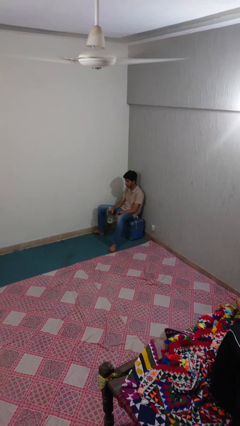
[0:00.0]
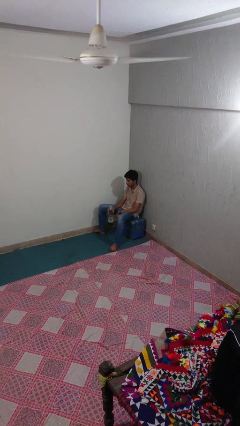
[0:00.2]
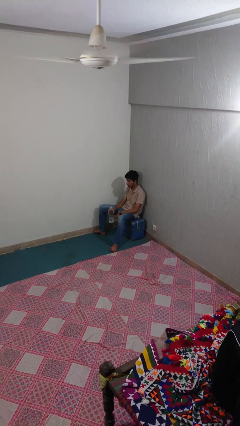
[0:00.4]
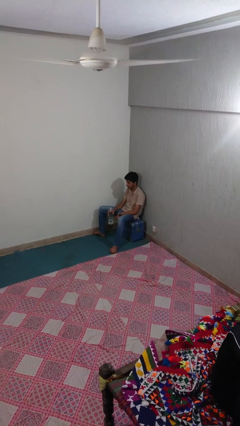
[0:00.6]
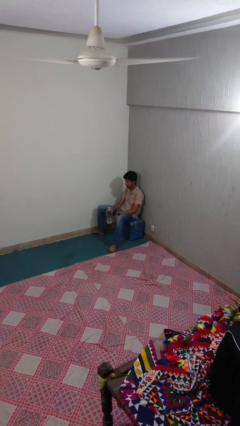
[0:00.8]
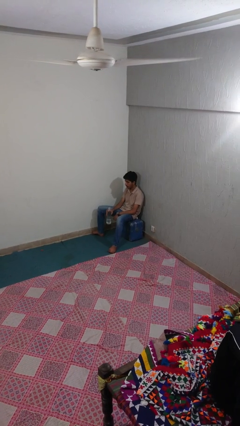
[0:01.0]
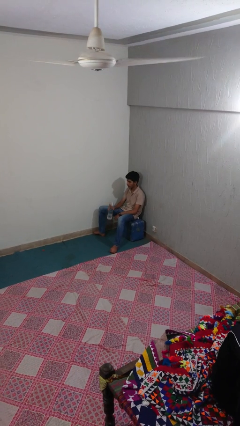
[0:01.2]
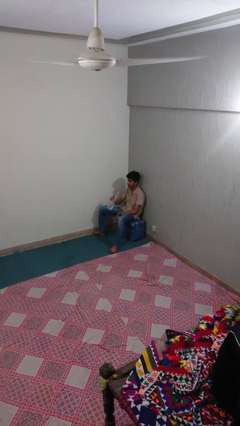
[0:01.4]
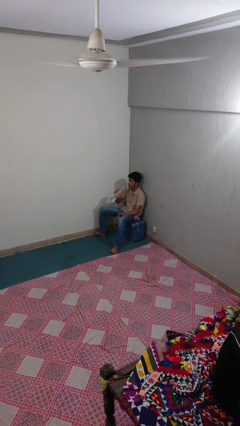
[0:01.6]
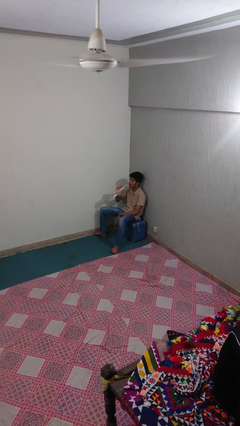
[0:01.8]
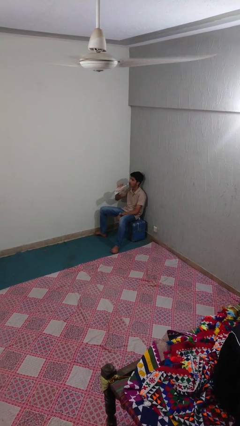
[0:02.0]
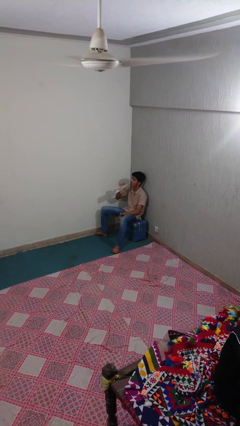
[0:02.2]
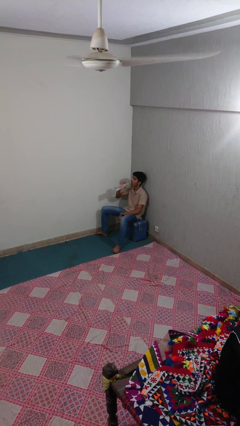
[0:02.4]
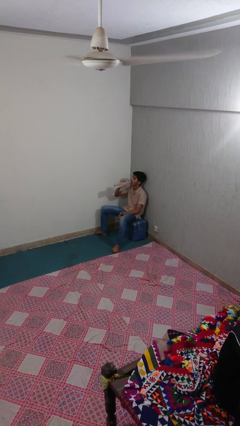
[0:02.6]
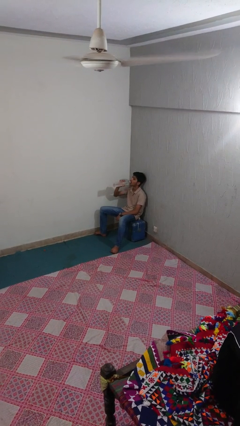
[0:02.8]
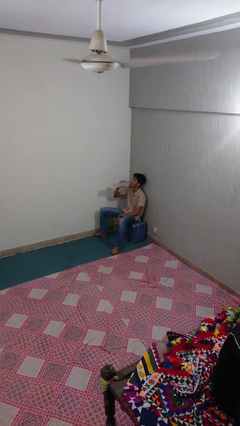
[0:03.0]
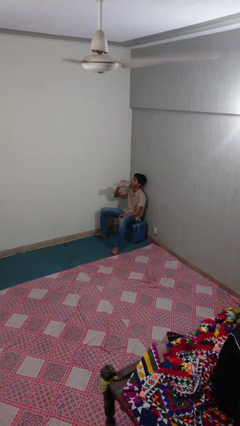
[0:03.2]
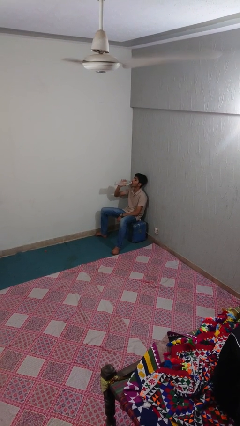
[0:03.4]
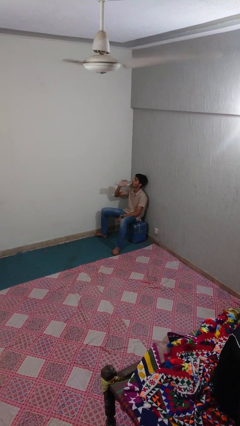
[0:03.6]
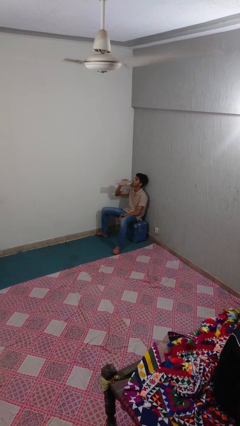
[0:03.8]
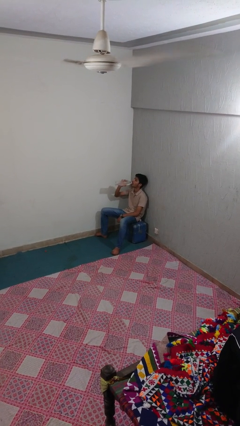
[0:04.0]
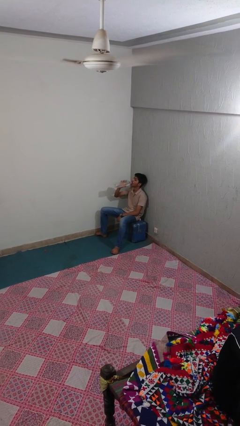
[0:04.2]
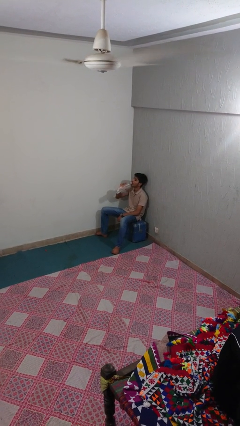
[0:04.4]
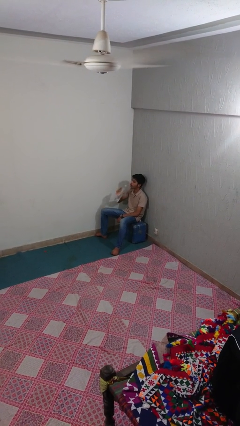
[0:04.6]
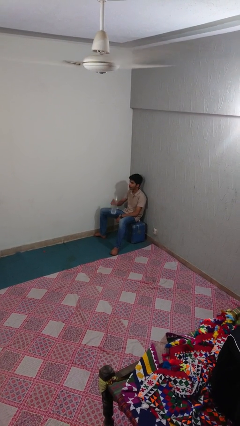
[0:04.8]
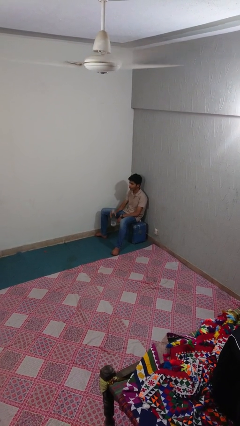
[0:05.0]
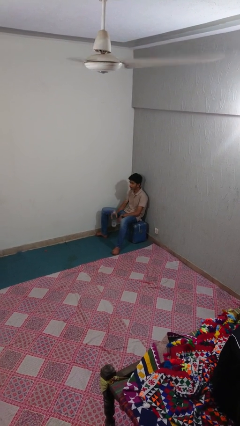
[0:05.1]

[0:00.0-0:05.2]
person drinks from bottle

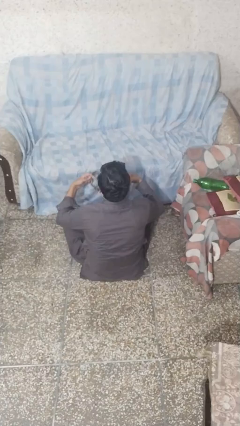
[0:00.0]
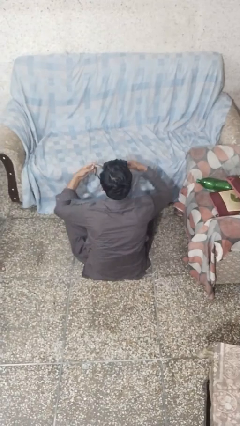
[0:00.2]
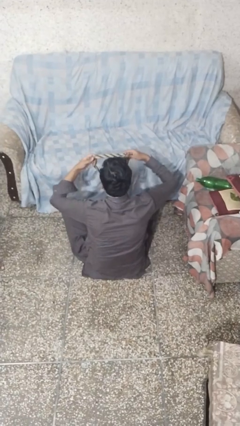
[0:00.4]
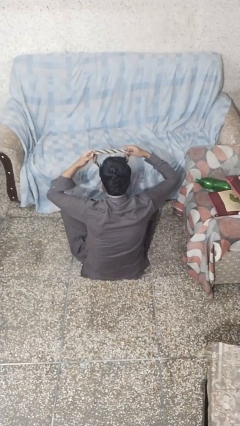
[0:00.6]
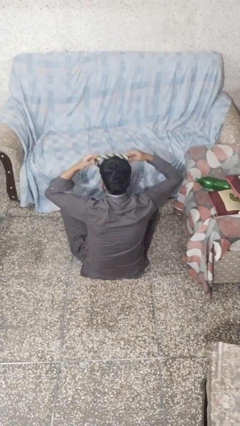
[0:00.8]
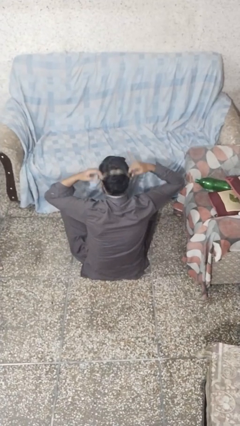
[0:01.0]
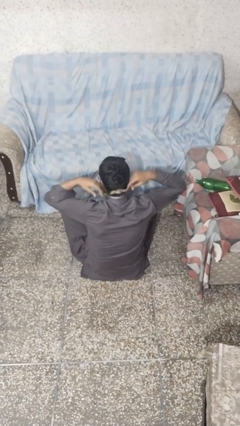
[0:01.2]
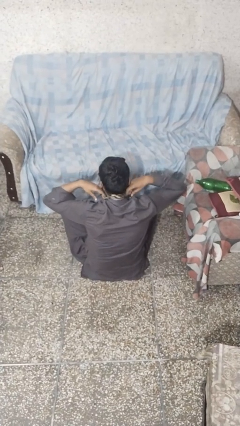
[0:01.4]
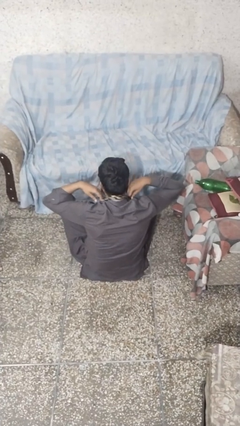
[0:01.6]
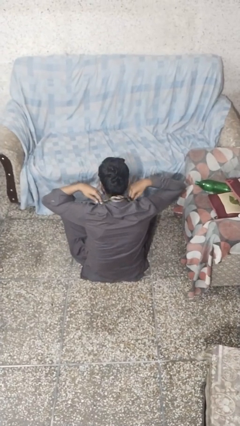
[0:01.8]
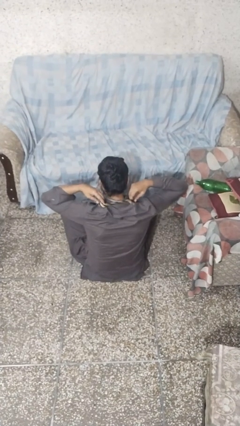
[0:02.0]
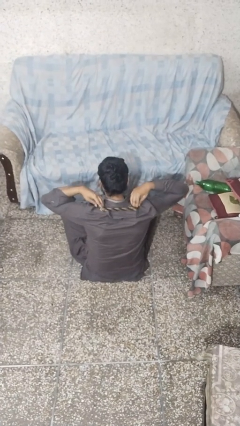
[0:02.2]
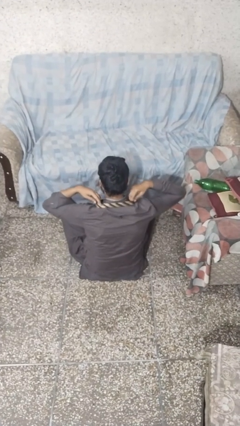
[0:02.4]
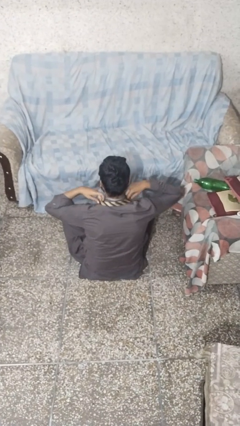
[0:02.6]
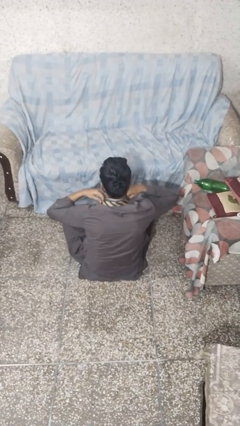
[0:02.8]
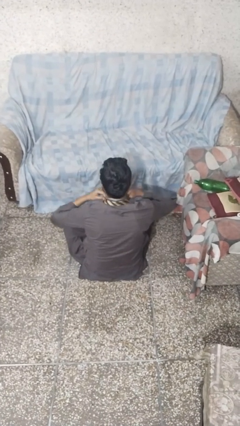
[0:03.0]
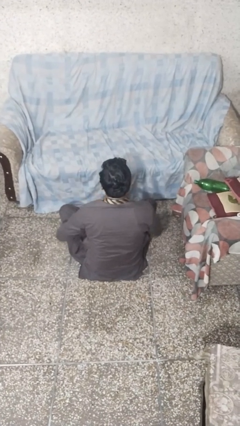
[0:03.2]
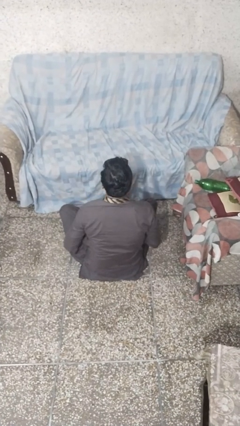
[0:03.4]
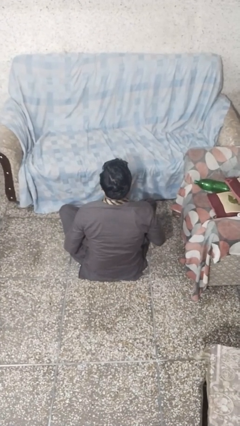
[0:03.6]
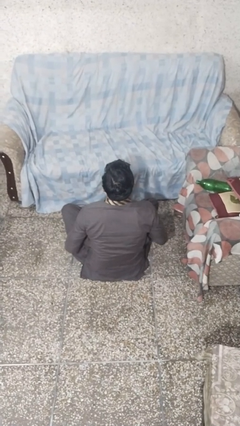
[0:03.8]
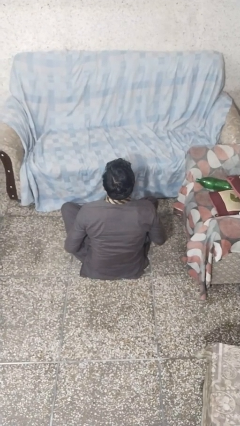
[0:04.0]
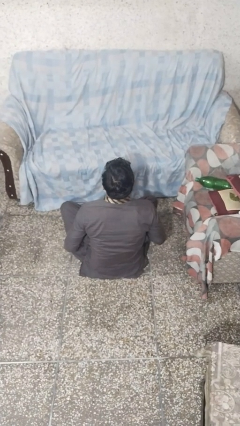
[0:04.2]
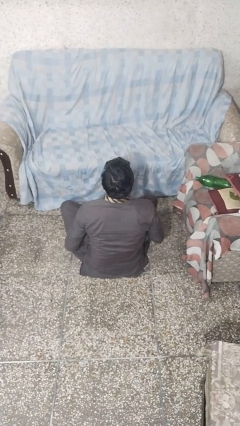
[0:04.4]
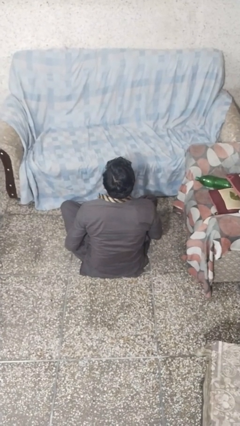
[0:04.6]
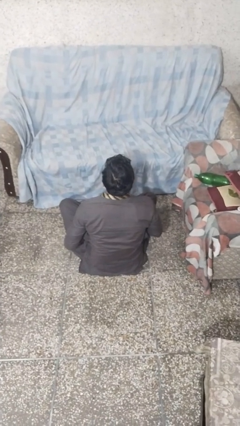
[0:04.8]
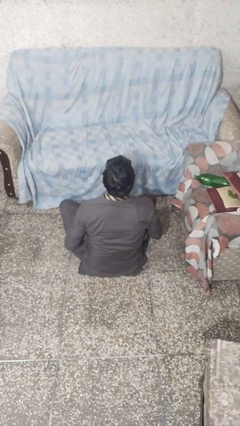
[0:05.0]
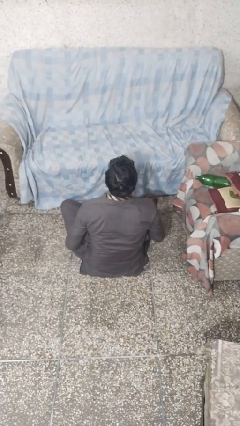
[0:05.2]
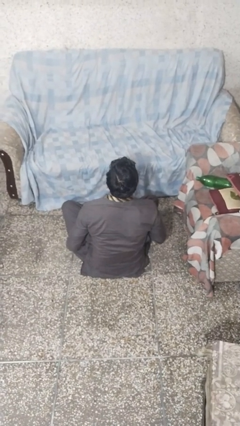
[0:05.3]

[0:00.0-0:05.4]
person puts on necktie

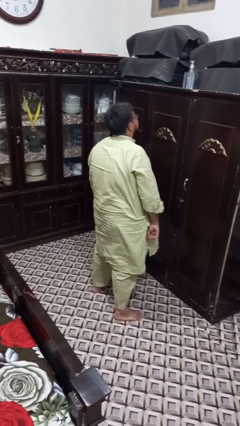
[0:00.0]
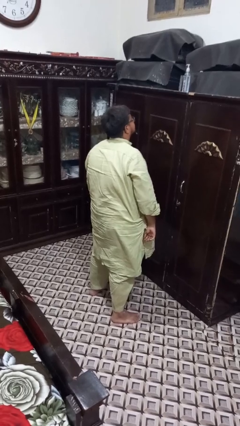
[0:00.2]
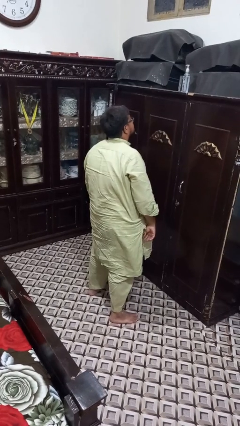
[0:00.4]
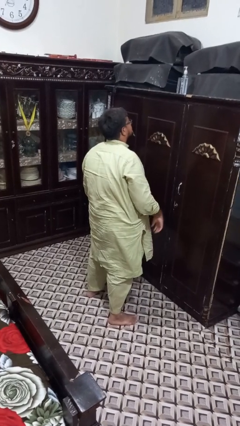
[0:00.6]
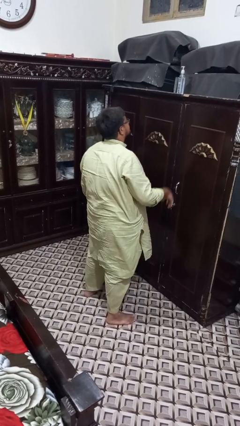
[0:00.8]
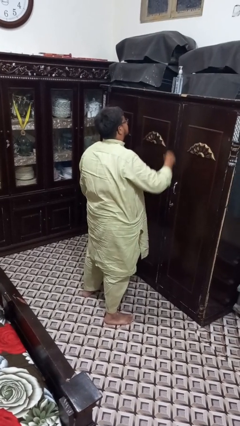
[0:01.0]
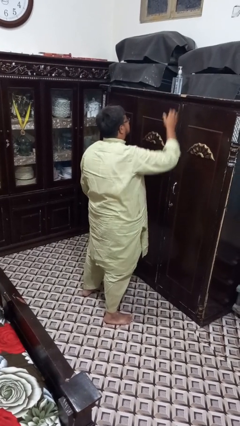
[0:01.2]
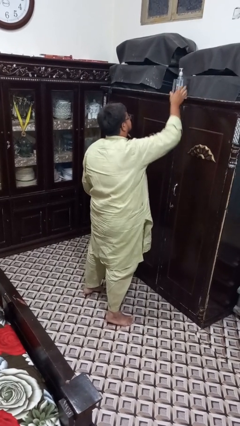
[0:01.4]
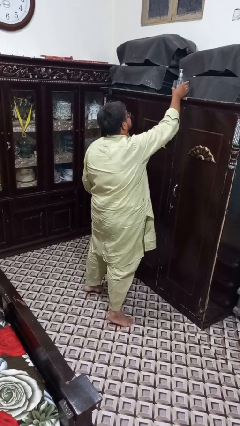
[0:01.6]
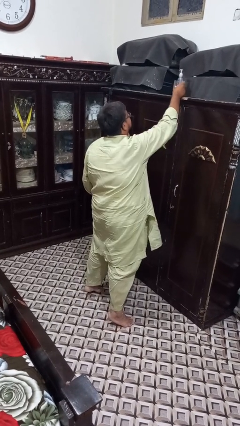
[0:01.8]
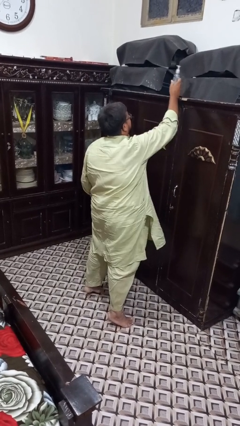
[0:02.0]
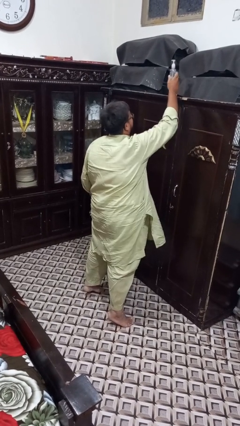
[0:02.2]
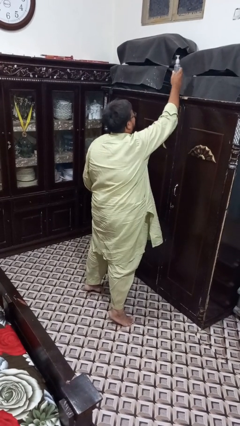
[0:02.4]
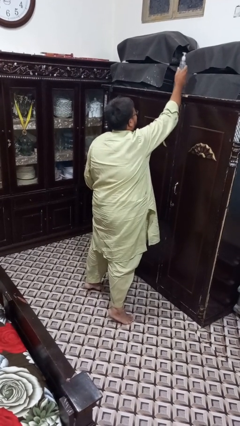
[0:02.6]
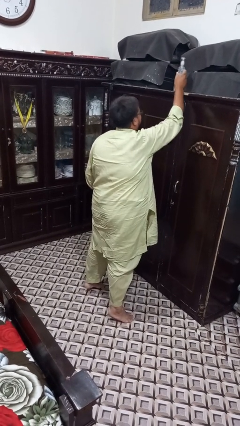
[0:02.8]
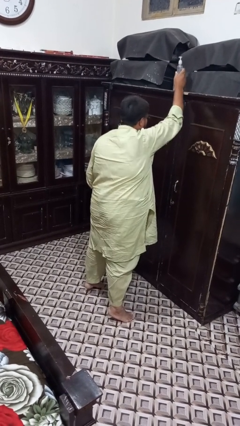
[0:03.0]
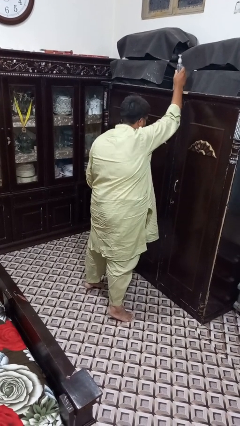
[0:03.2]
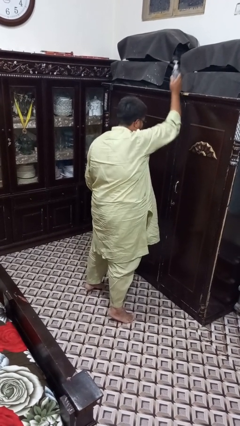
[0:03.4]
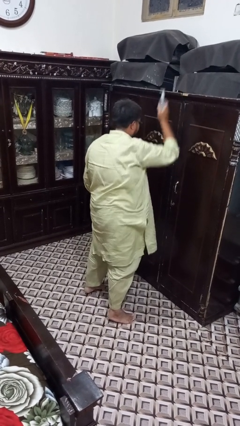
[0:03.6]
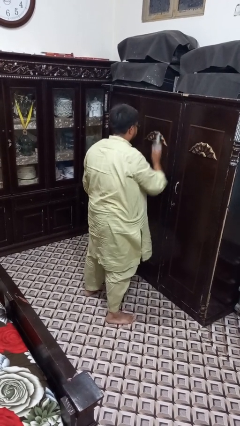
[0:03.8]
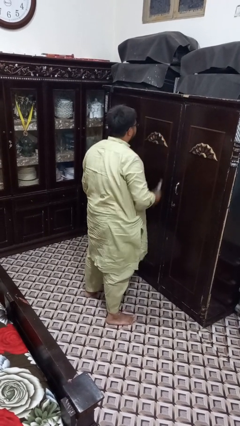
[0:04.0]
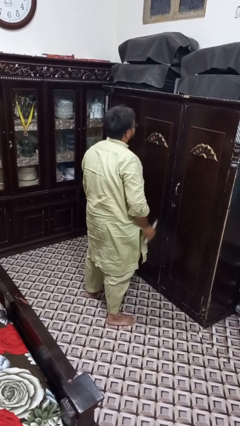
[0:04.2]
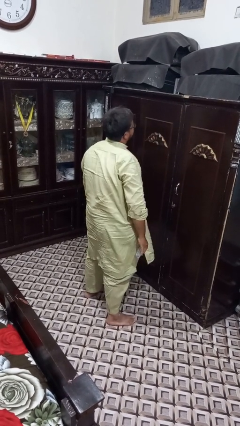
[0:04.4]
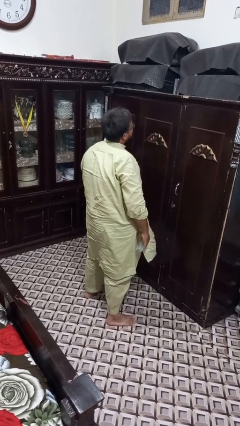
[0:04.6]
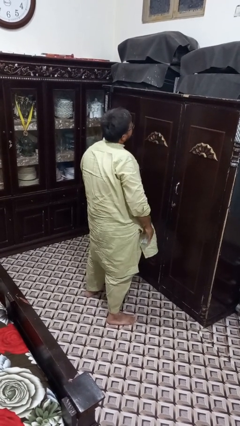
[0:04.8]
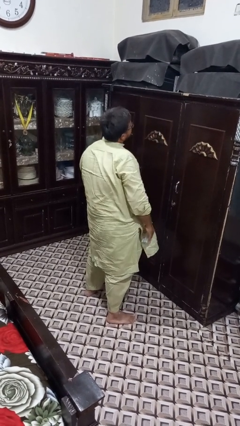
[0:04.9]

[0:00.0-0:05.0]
person picks up object from cabinet

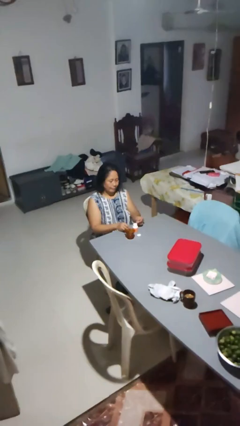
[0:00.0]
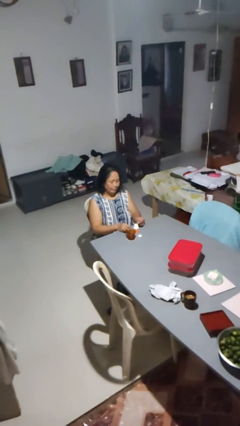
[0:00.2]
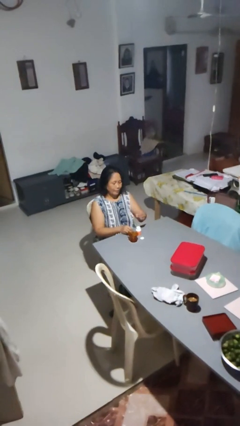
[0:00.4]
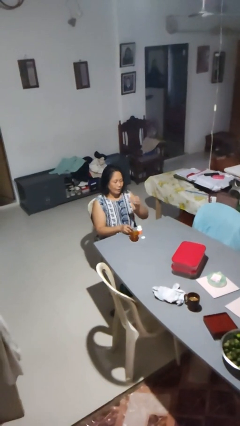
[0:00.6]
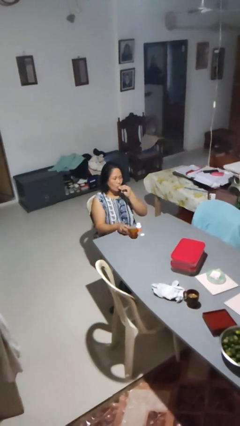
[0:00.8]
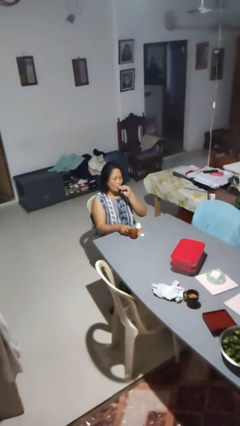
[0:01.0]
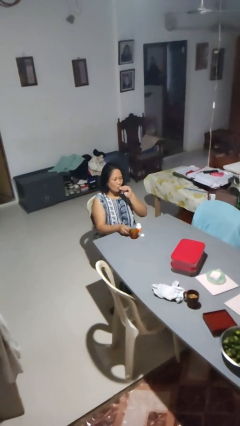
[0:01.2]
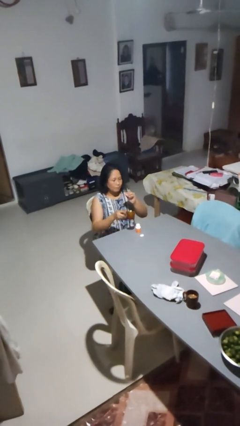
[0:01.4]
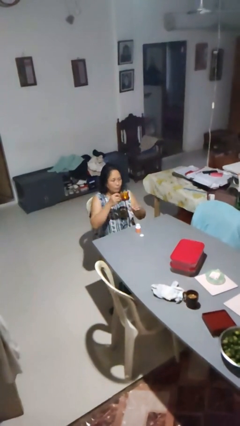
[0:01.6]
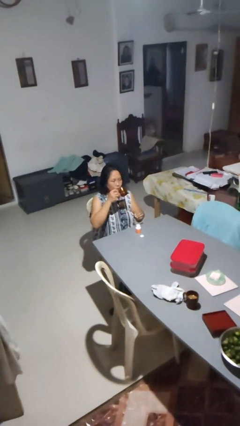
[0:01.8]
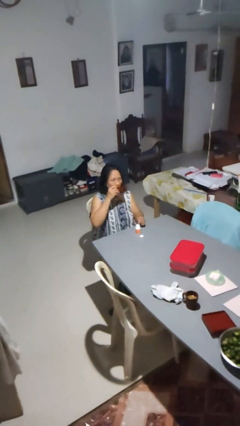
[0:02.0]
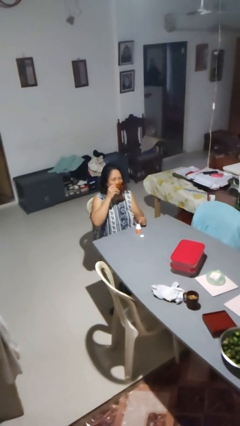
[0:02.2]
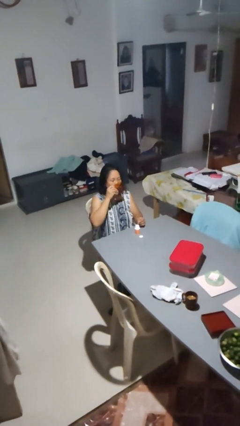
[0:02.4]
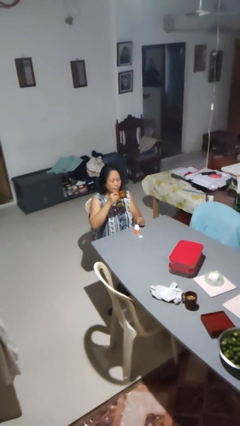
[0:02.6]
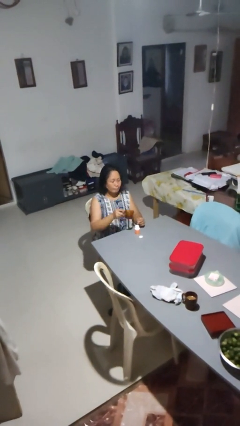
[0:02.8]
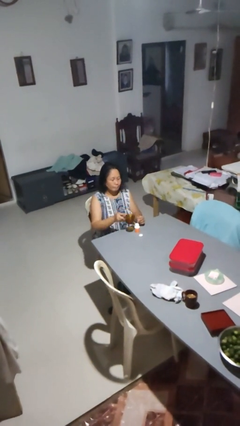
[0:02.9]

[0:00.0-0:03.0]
person drinks from cup
